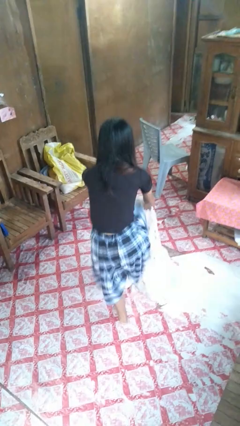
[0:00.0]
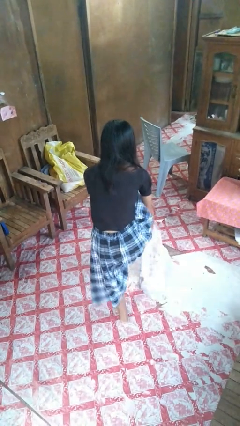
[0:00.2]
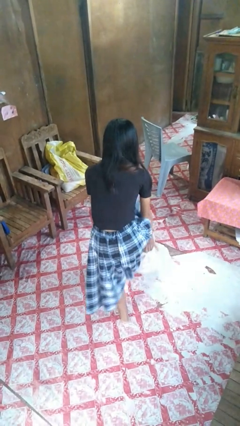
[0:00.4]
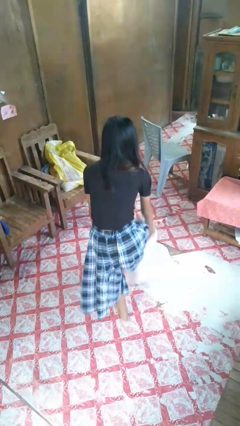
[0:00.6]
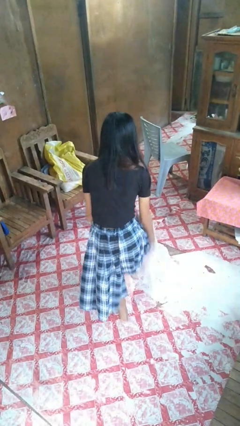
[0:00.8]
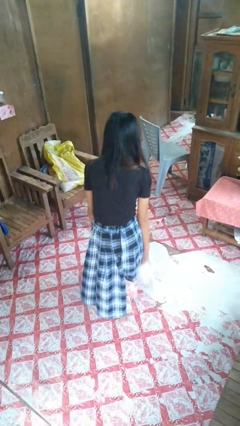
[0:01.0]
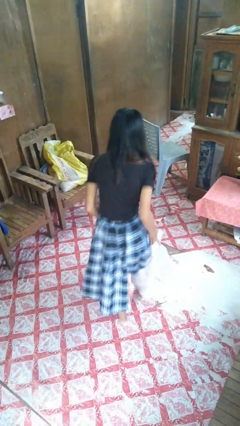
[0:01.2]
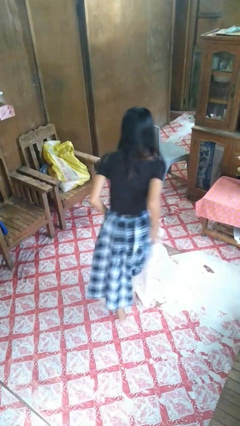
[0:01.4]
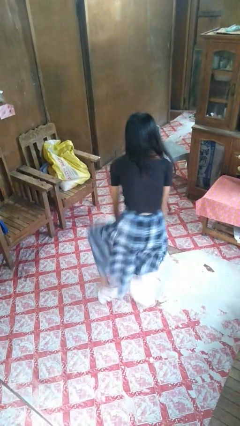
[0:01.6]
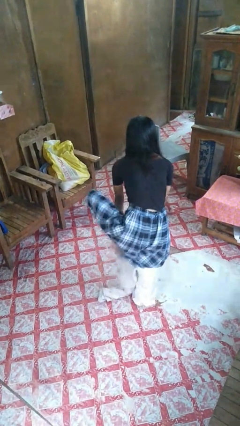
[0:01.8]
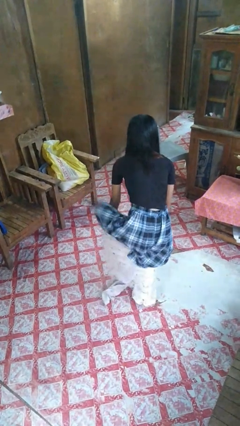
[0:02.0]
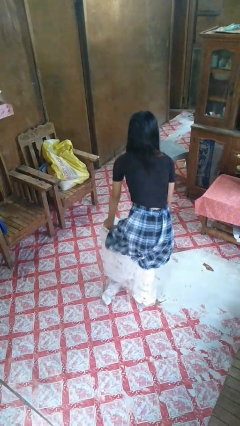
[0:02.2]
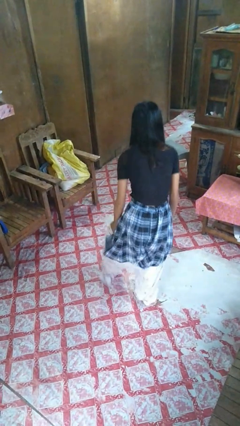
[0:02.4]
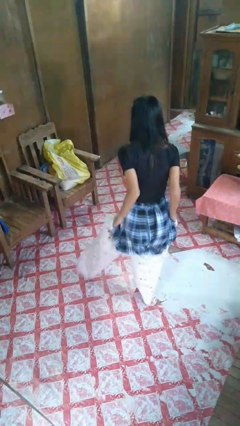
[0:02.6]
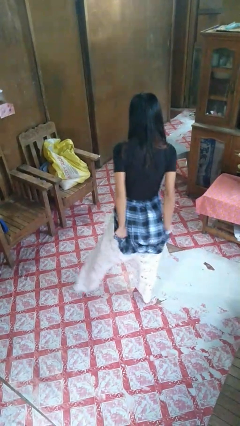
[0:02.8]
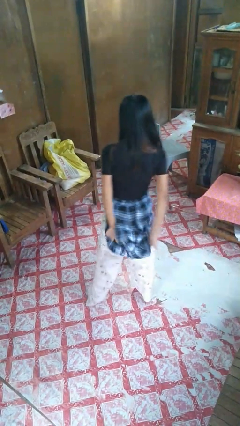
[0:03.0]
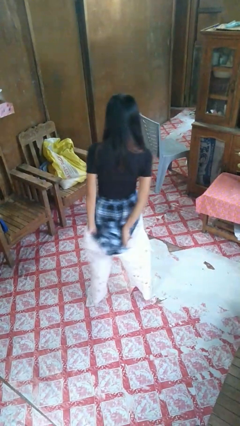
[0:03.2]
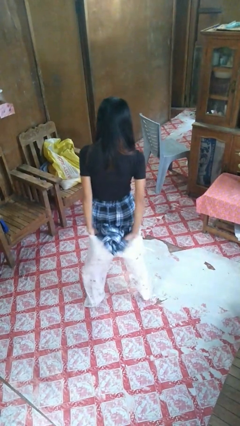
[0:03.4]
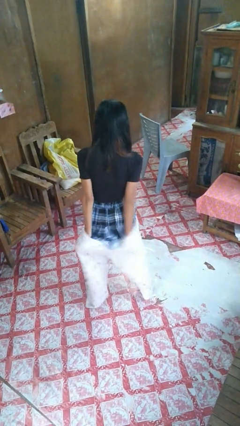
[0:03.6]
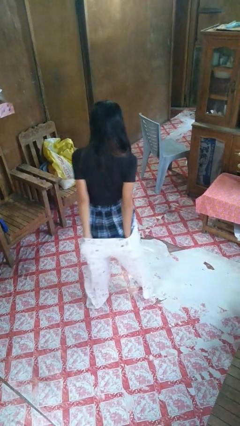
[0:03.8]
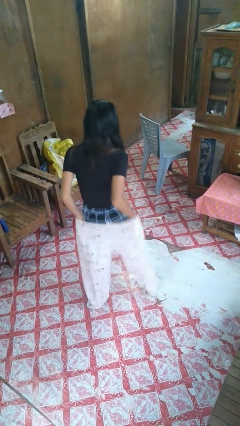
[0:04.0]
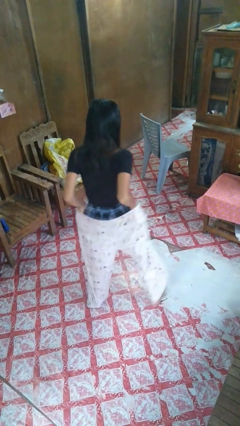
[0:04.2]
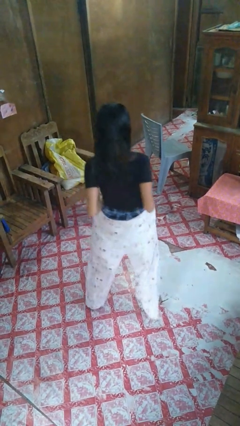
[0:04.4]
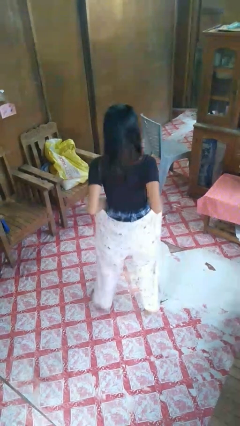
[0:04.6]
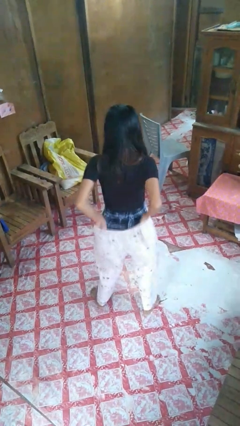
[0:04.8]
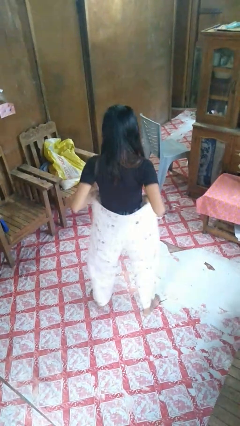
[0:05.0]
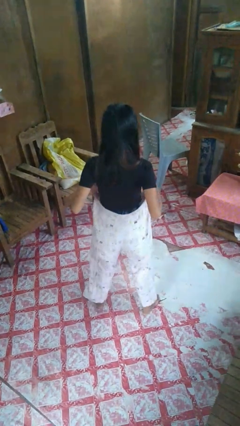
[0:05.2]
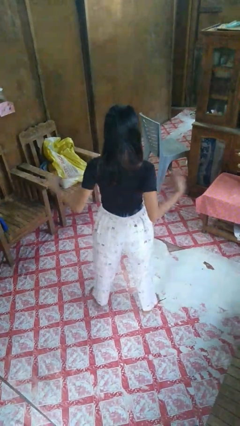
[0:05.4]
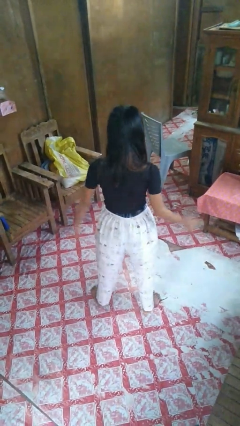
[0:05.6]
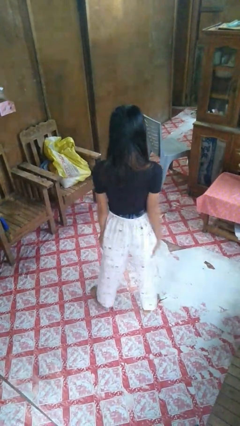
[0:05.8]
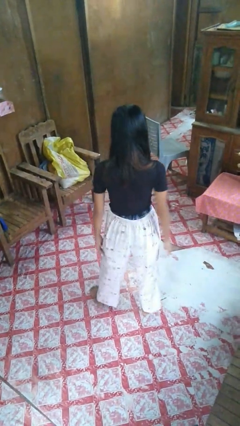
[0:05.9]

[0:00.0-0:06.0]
person puts on pants

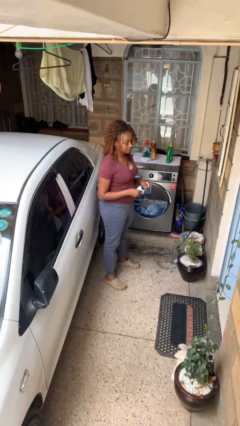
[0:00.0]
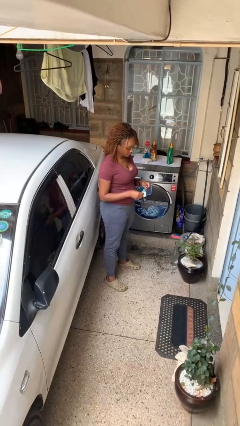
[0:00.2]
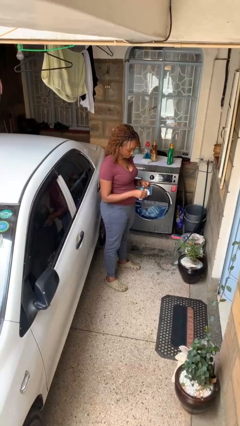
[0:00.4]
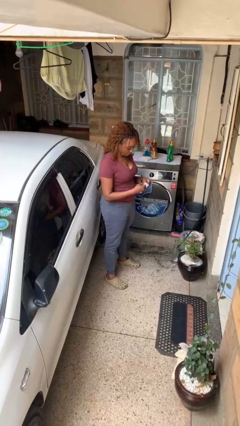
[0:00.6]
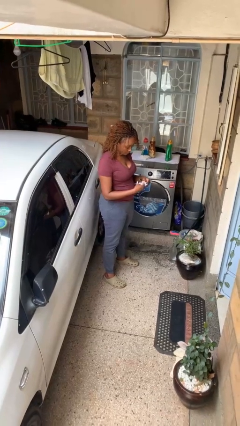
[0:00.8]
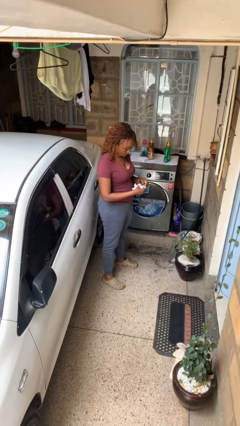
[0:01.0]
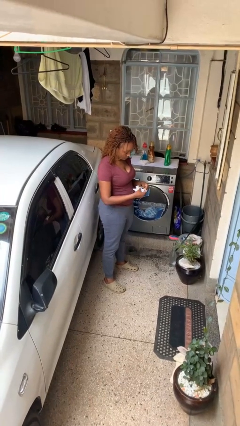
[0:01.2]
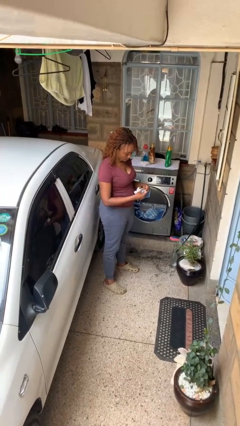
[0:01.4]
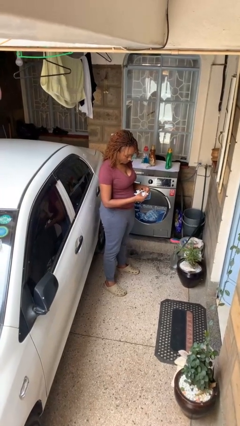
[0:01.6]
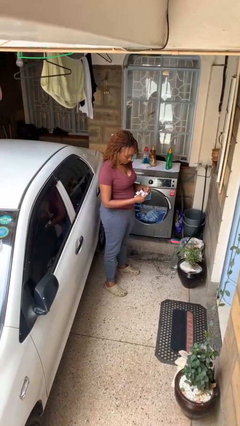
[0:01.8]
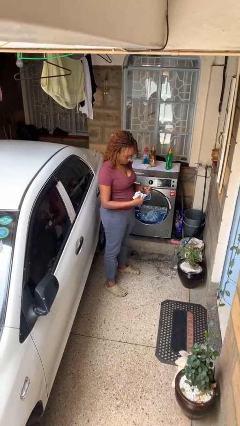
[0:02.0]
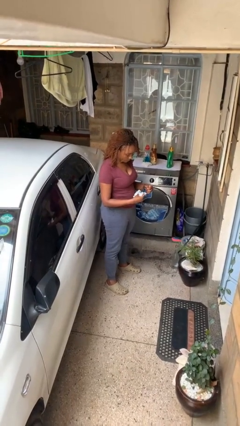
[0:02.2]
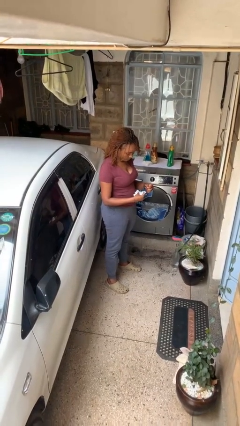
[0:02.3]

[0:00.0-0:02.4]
person cleans eyeglasses

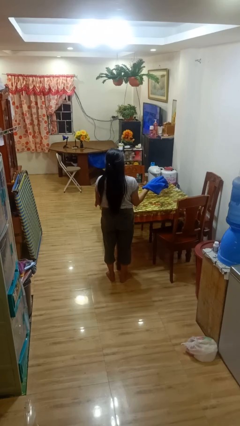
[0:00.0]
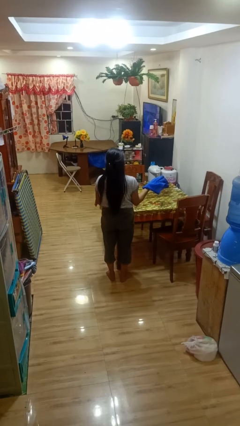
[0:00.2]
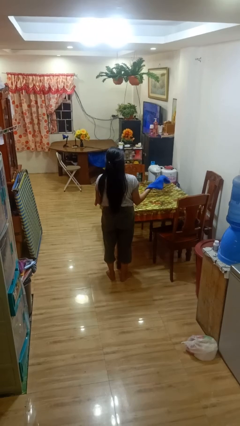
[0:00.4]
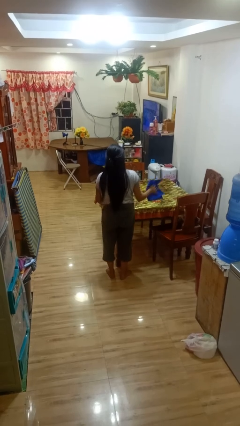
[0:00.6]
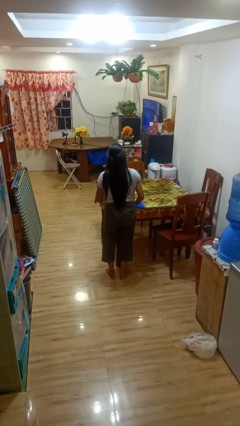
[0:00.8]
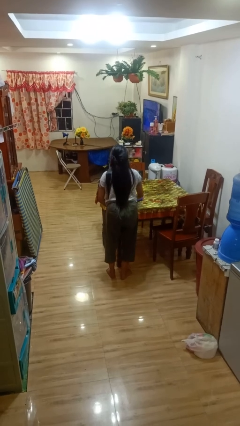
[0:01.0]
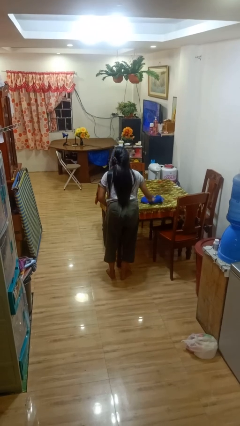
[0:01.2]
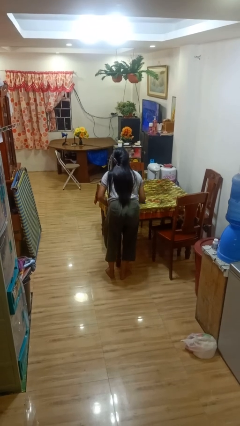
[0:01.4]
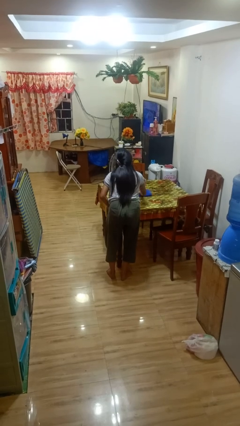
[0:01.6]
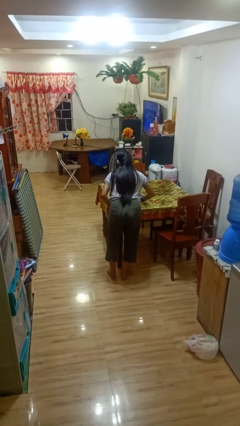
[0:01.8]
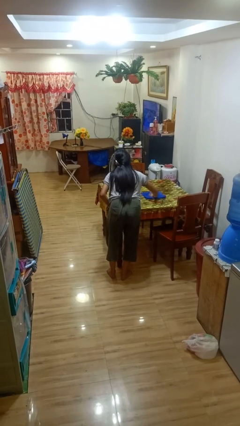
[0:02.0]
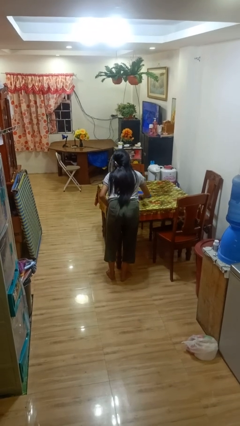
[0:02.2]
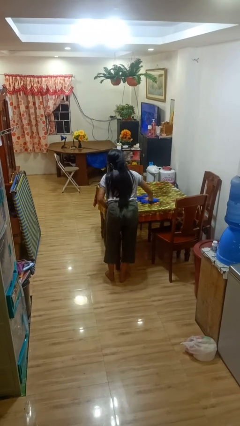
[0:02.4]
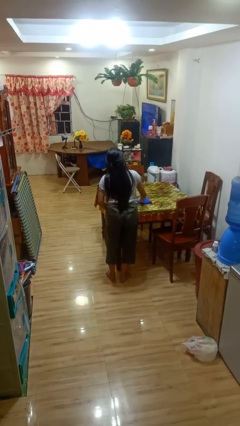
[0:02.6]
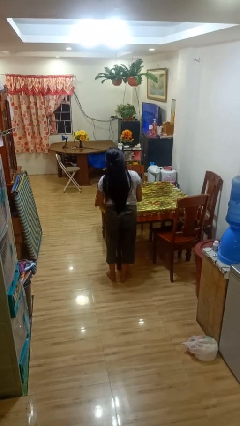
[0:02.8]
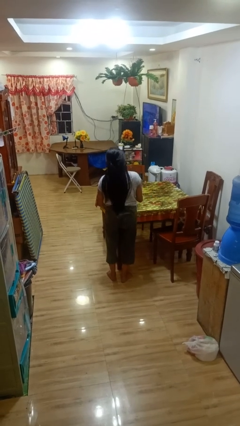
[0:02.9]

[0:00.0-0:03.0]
person cleans table with rag

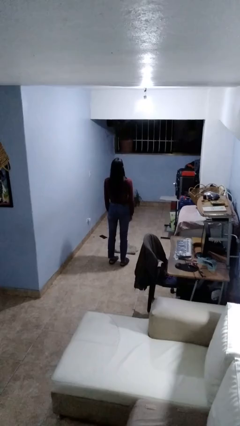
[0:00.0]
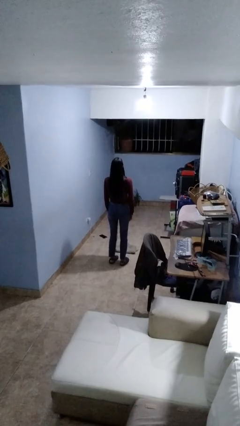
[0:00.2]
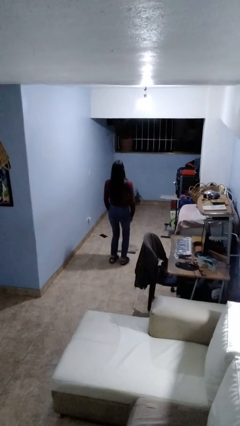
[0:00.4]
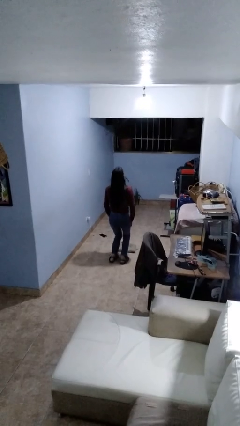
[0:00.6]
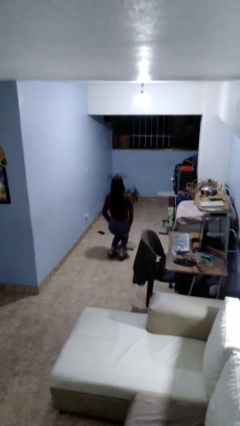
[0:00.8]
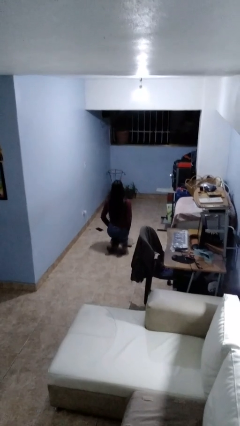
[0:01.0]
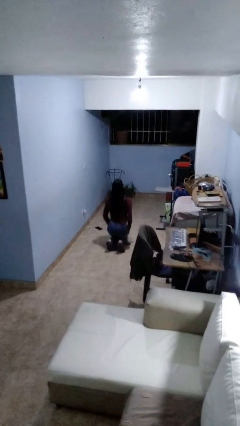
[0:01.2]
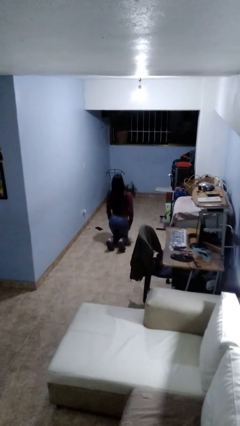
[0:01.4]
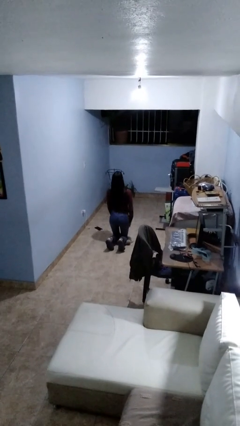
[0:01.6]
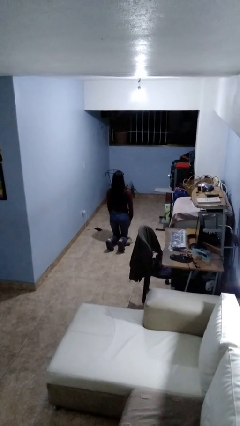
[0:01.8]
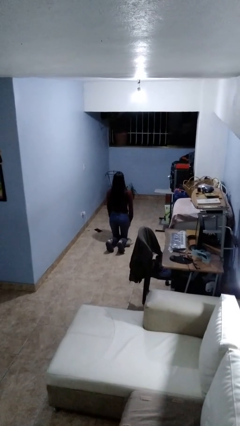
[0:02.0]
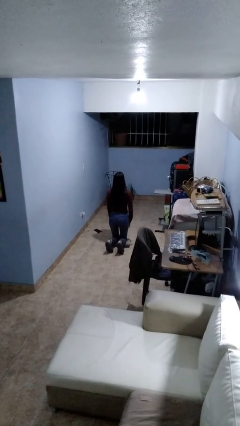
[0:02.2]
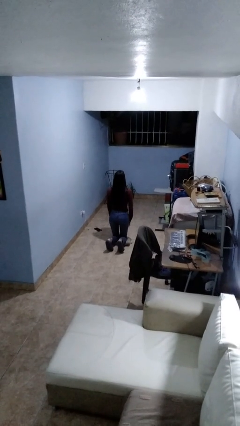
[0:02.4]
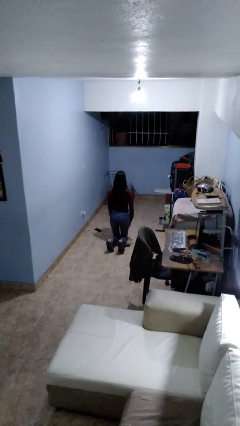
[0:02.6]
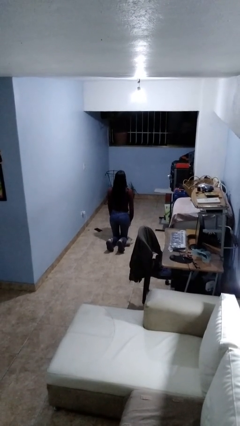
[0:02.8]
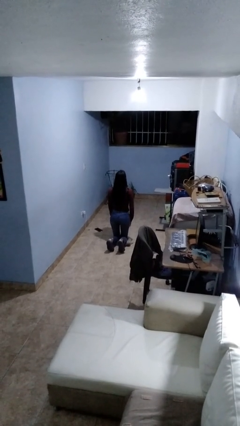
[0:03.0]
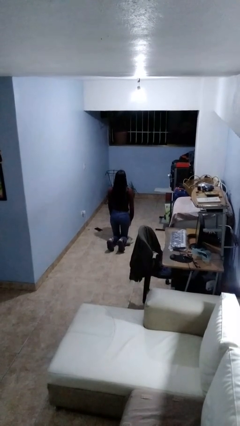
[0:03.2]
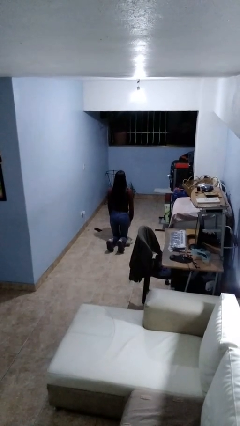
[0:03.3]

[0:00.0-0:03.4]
person kneels

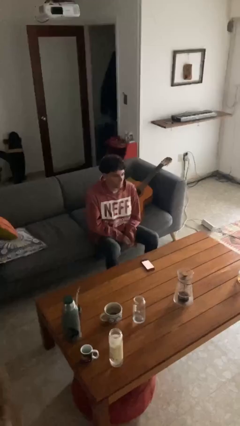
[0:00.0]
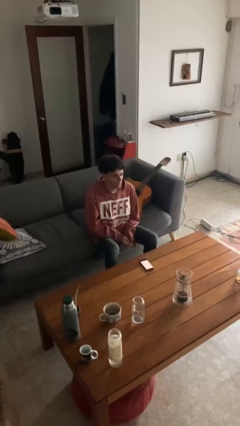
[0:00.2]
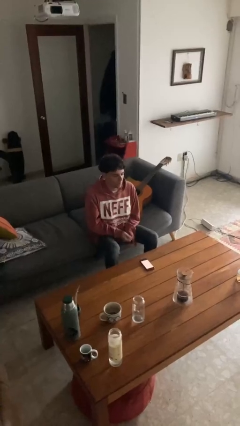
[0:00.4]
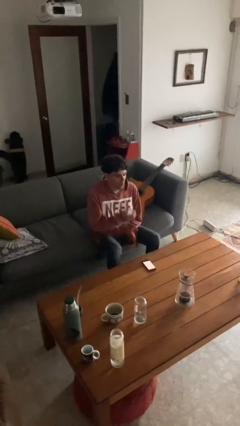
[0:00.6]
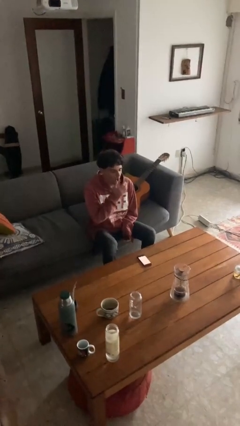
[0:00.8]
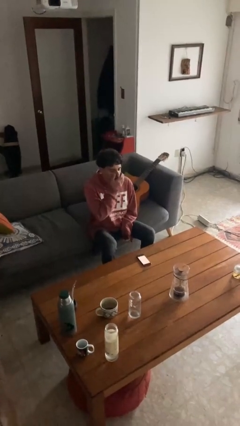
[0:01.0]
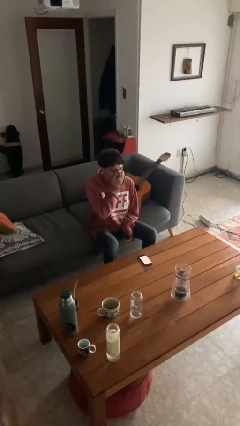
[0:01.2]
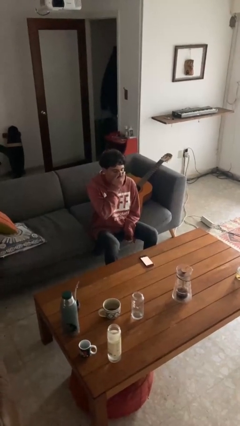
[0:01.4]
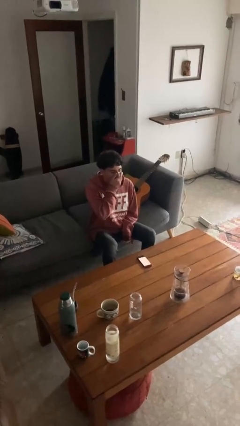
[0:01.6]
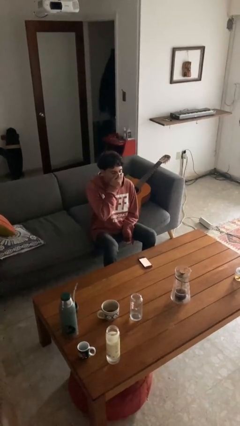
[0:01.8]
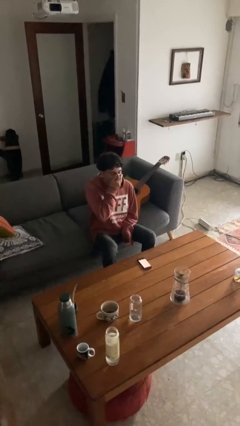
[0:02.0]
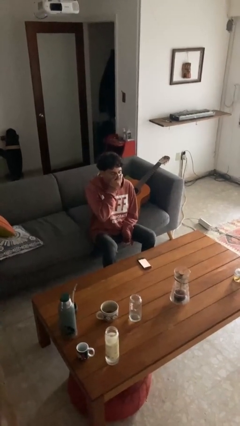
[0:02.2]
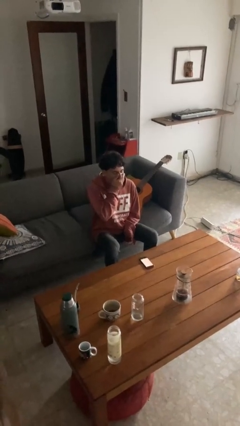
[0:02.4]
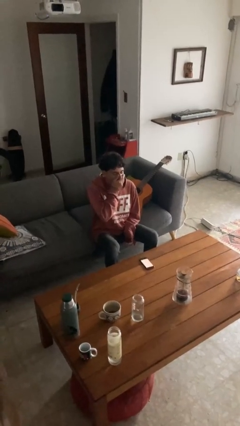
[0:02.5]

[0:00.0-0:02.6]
person yawns

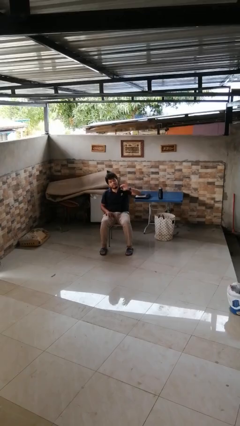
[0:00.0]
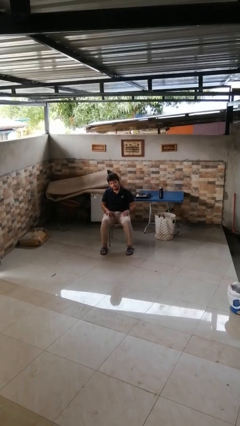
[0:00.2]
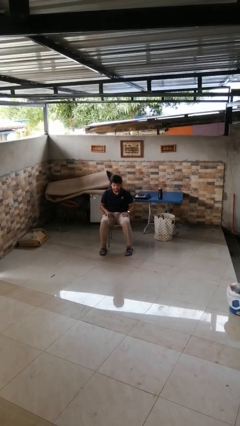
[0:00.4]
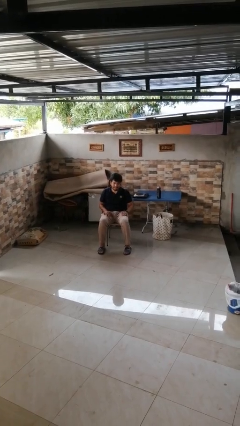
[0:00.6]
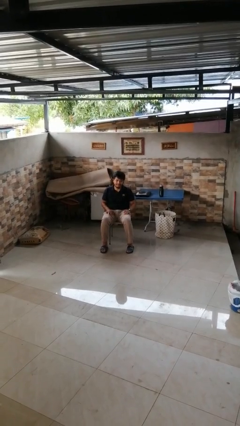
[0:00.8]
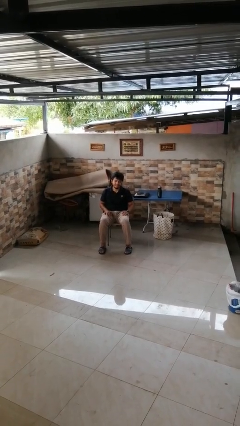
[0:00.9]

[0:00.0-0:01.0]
person gestures lower hand
